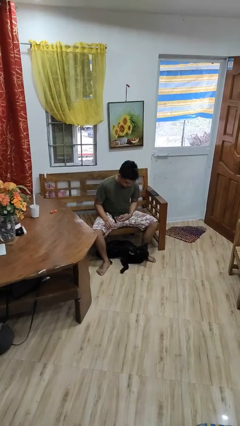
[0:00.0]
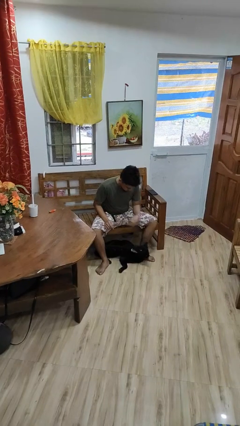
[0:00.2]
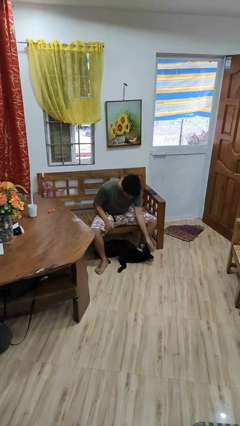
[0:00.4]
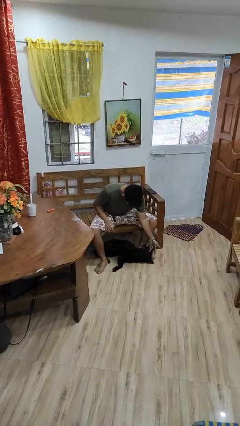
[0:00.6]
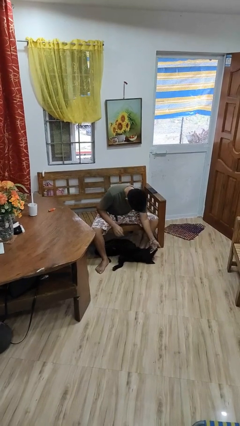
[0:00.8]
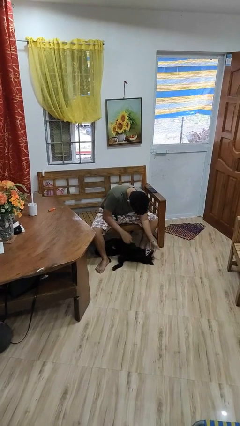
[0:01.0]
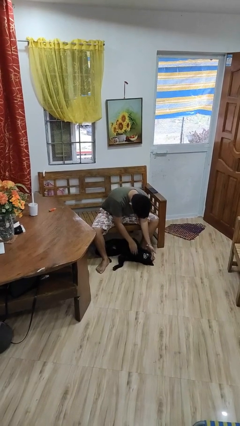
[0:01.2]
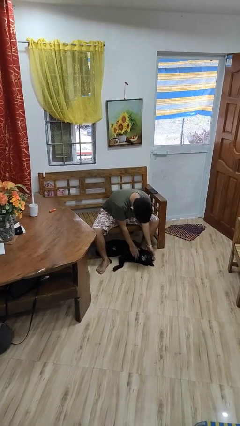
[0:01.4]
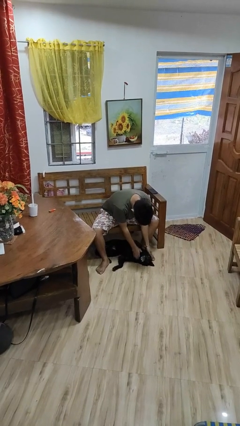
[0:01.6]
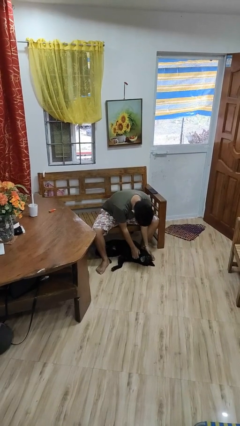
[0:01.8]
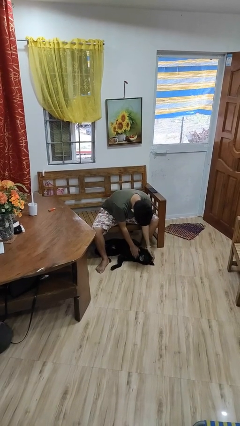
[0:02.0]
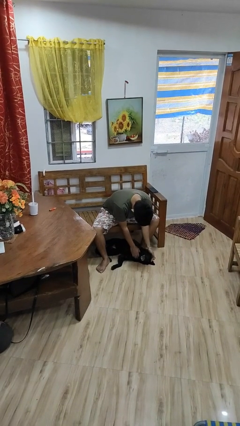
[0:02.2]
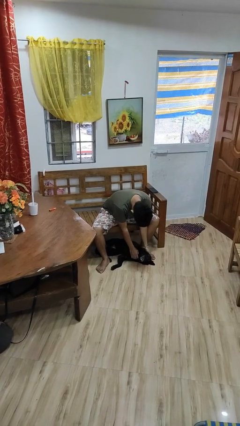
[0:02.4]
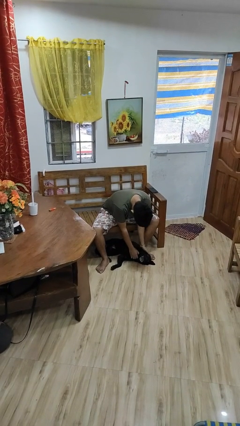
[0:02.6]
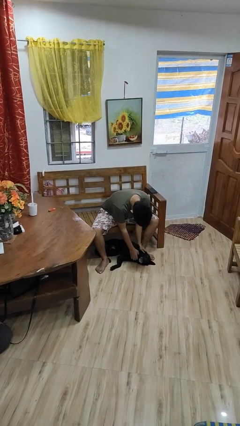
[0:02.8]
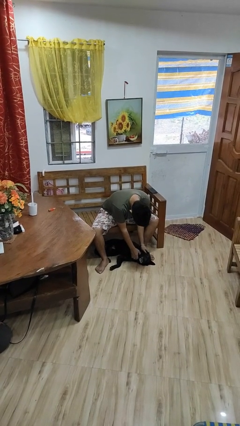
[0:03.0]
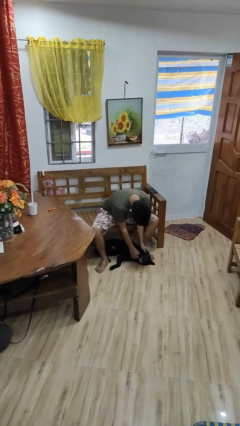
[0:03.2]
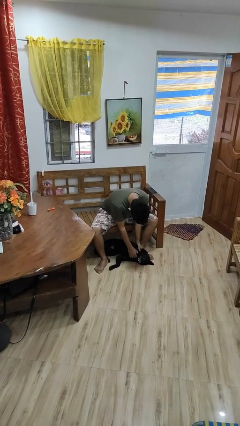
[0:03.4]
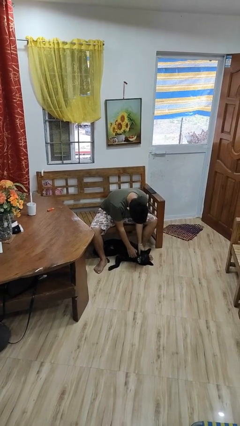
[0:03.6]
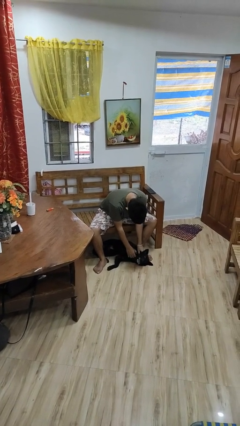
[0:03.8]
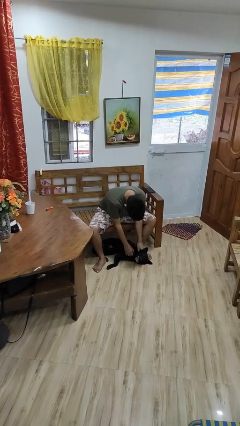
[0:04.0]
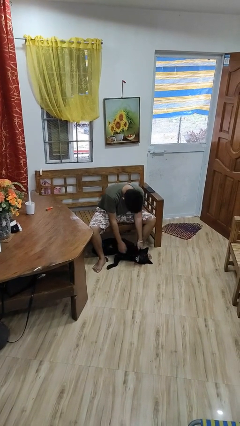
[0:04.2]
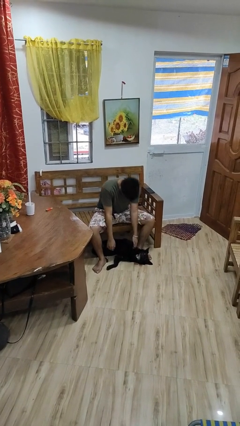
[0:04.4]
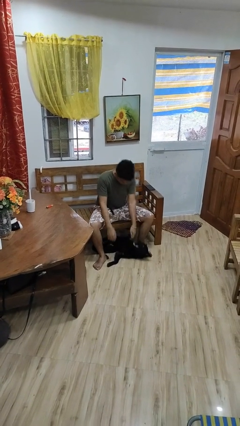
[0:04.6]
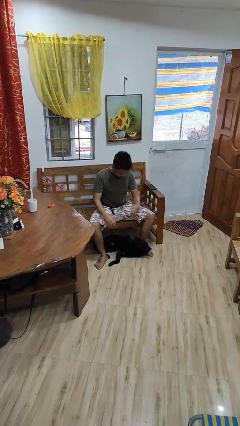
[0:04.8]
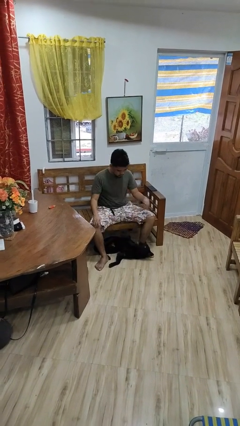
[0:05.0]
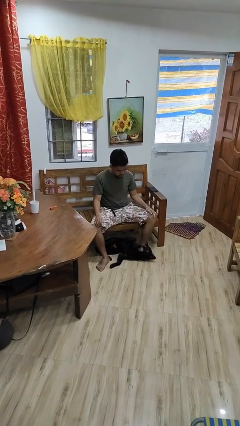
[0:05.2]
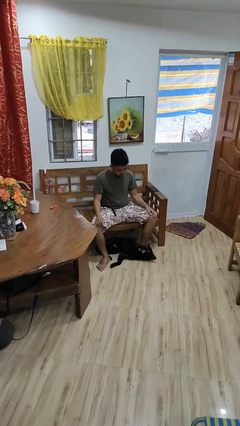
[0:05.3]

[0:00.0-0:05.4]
person pets dog

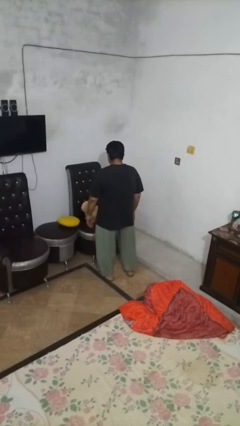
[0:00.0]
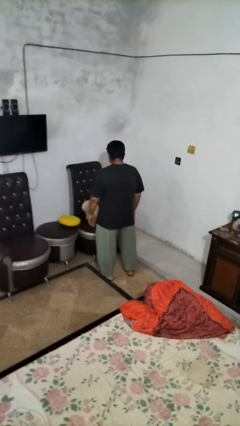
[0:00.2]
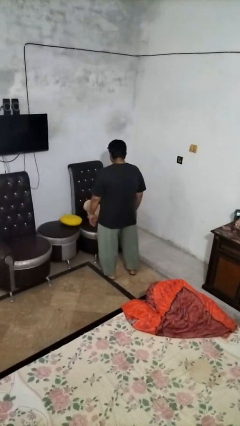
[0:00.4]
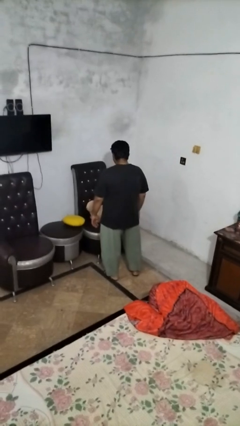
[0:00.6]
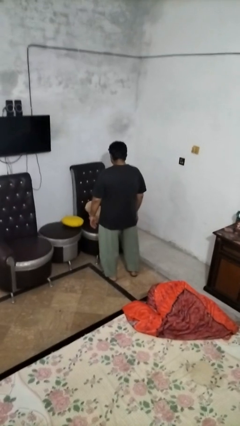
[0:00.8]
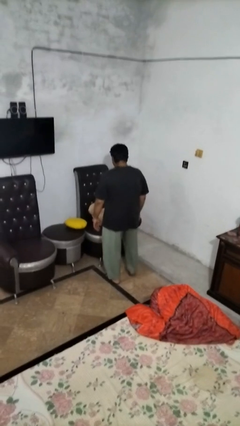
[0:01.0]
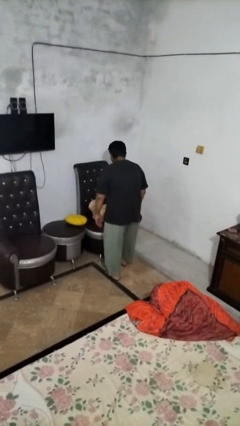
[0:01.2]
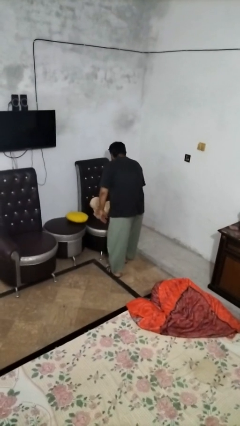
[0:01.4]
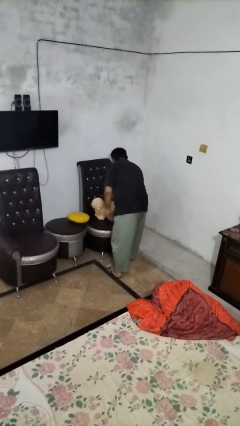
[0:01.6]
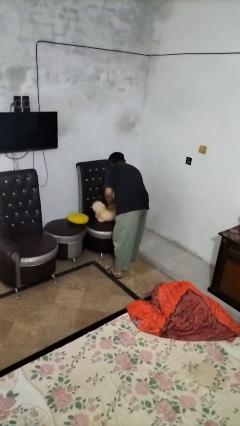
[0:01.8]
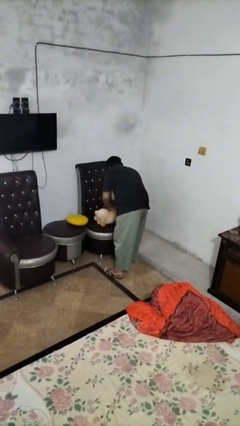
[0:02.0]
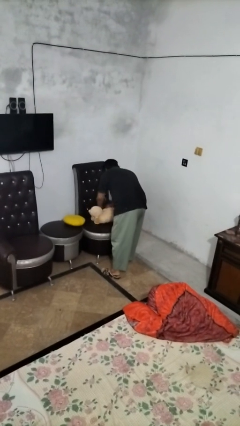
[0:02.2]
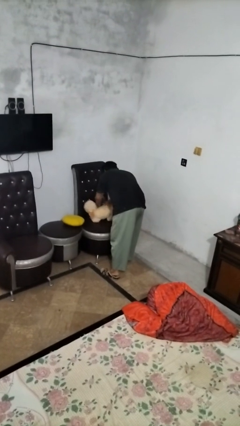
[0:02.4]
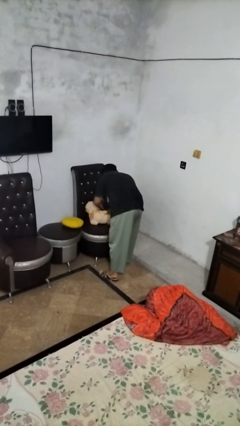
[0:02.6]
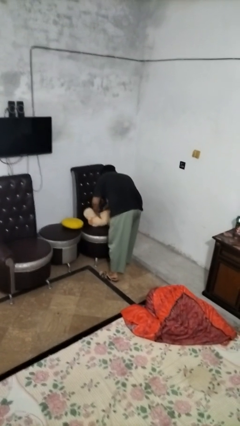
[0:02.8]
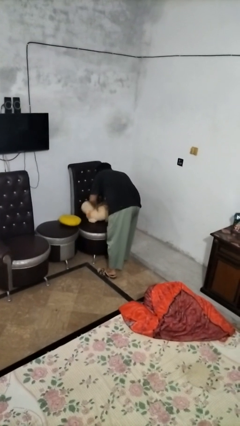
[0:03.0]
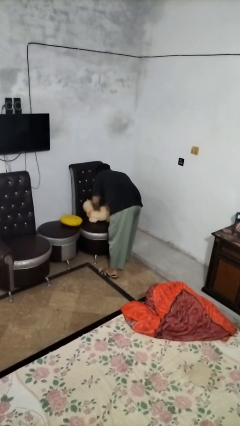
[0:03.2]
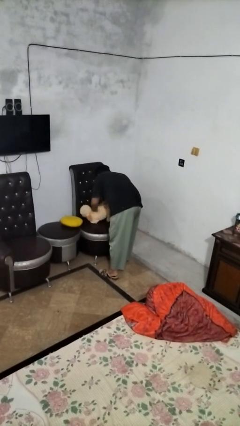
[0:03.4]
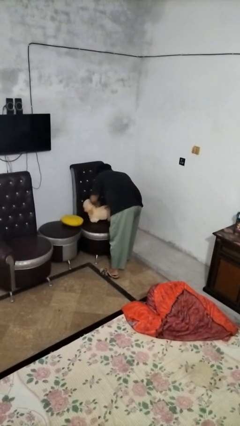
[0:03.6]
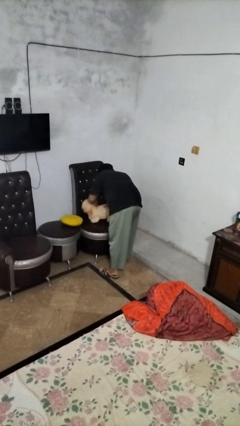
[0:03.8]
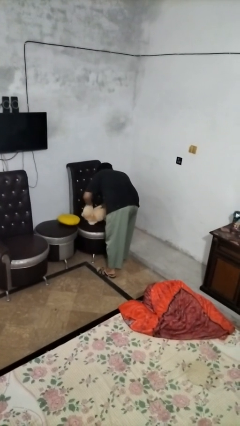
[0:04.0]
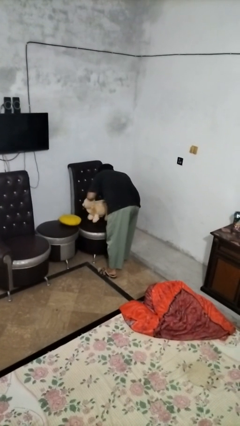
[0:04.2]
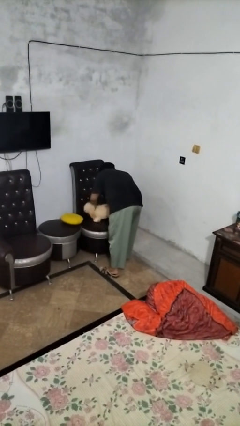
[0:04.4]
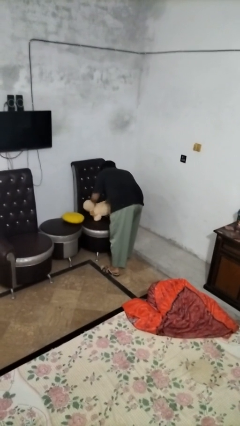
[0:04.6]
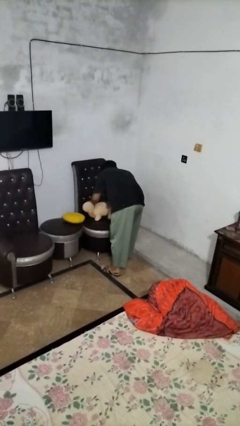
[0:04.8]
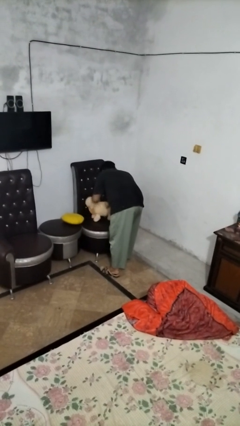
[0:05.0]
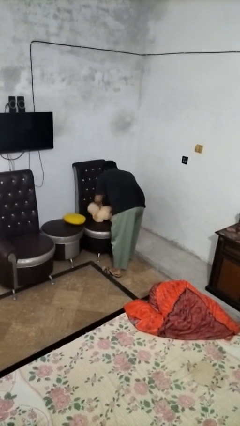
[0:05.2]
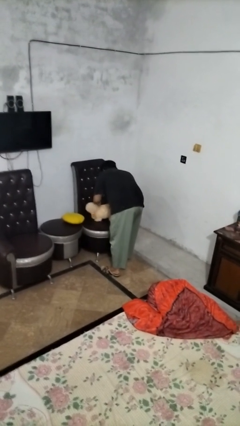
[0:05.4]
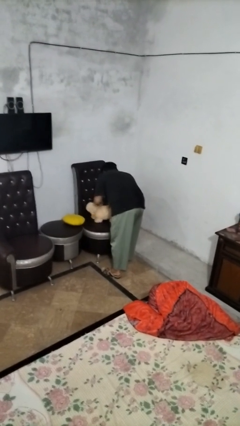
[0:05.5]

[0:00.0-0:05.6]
person searches in couch

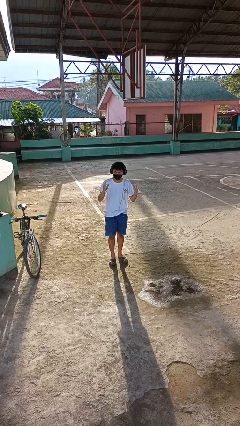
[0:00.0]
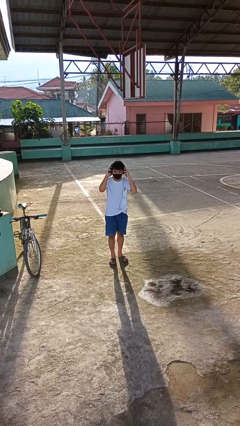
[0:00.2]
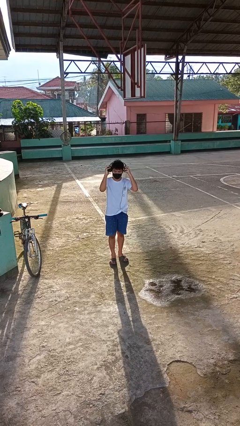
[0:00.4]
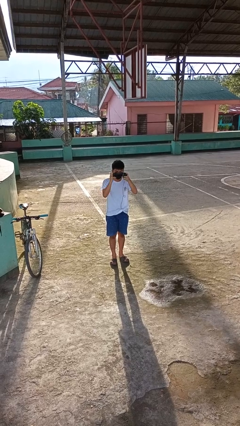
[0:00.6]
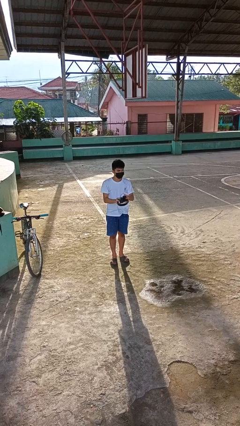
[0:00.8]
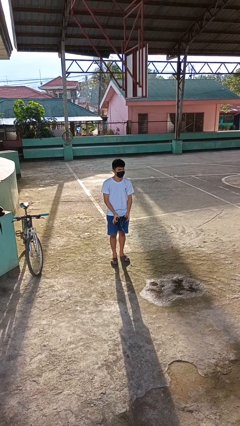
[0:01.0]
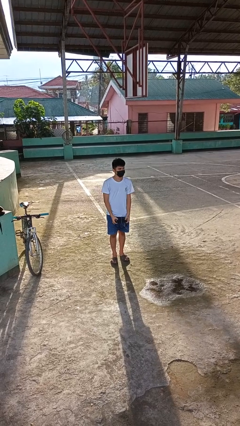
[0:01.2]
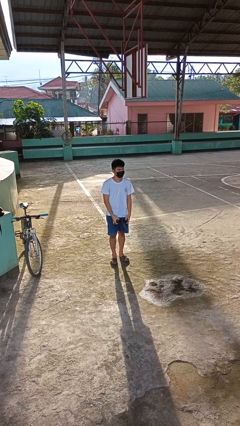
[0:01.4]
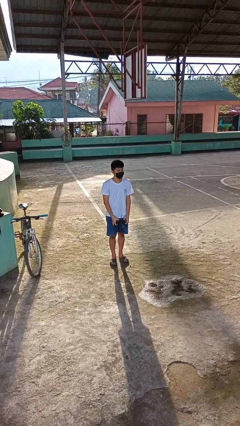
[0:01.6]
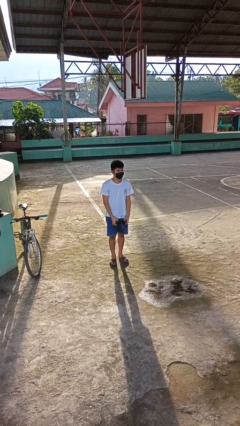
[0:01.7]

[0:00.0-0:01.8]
person takes off headphones

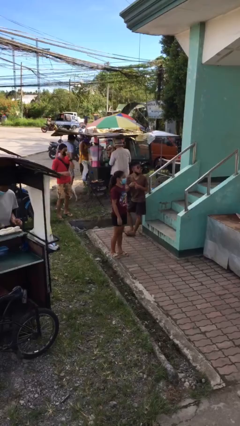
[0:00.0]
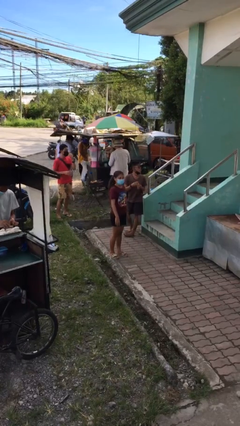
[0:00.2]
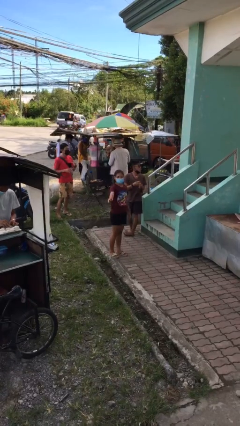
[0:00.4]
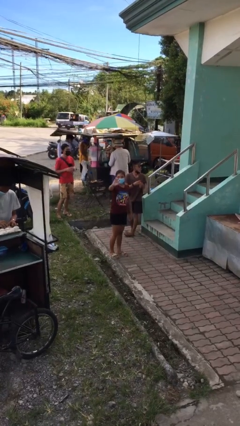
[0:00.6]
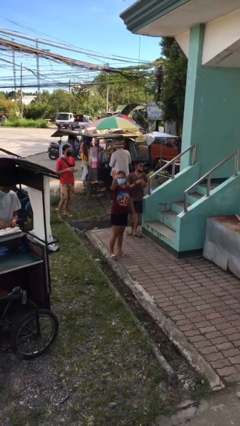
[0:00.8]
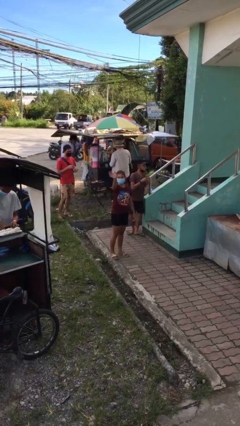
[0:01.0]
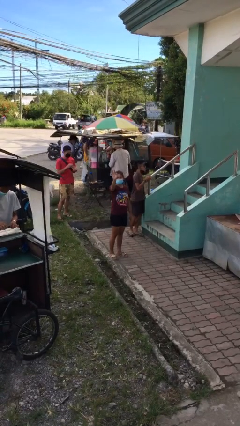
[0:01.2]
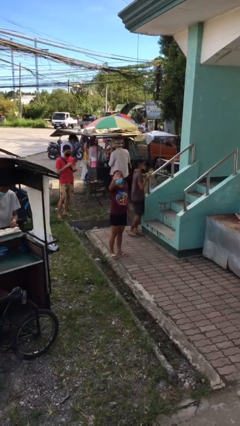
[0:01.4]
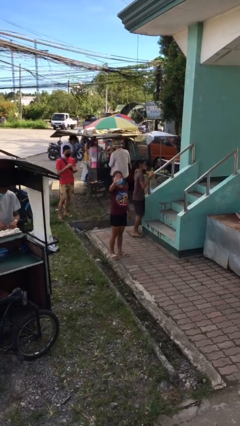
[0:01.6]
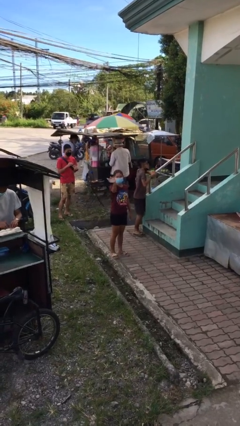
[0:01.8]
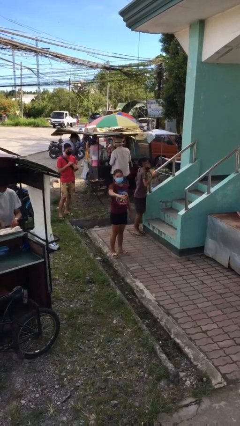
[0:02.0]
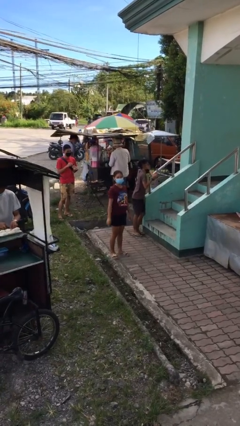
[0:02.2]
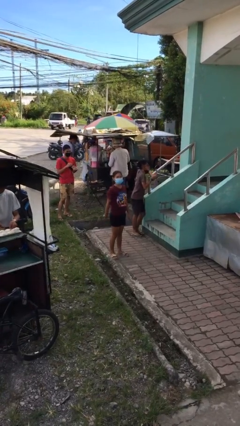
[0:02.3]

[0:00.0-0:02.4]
person waves at person

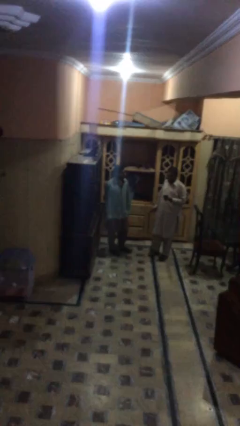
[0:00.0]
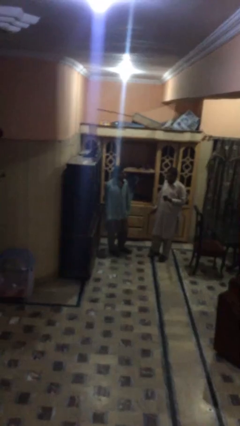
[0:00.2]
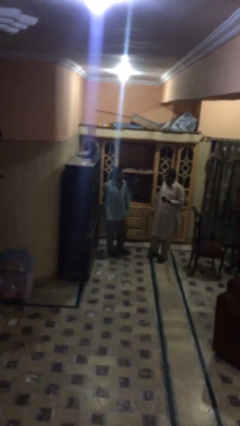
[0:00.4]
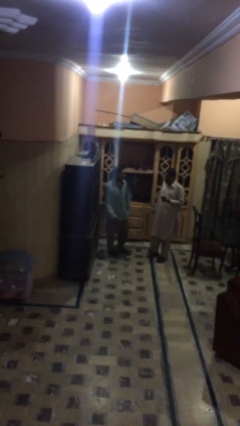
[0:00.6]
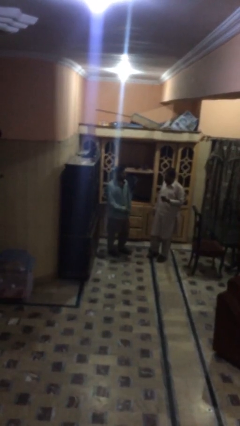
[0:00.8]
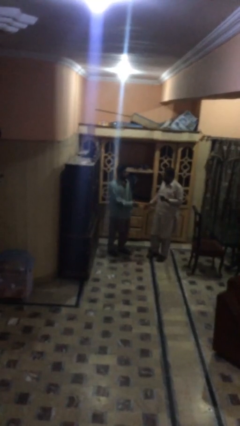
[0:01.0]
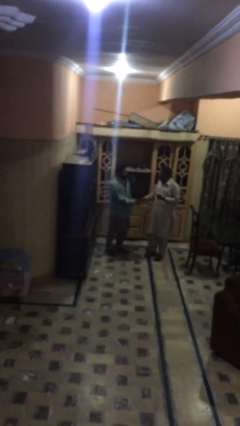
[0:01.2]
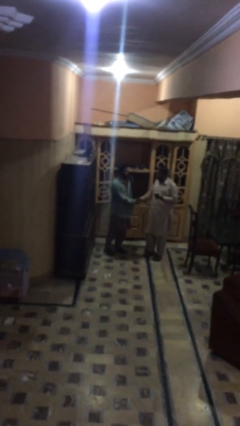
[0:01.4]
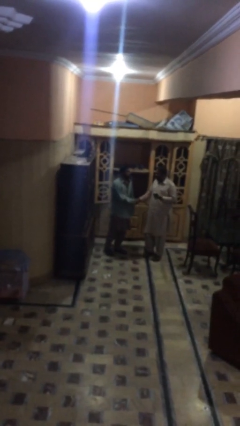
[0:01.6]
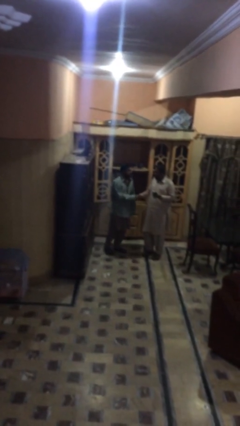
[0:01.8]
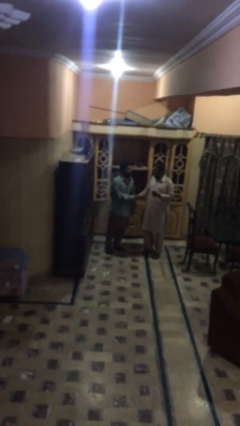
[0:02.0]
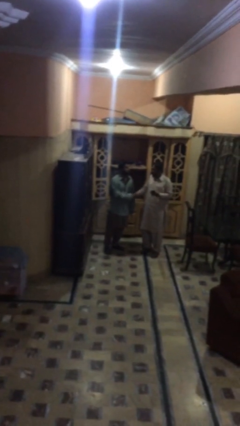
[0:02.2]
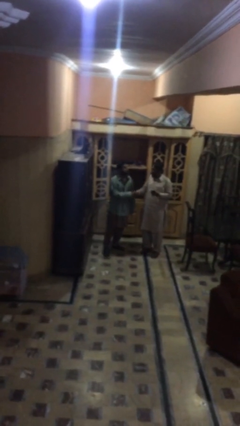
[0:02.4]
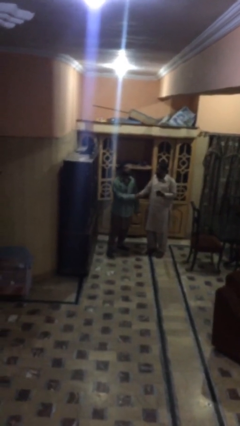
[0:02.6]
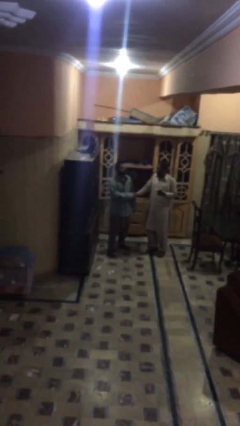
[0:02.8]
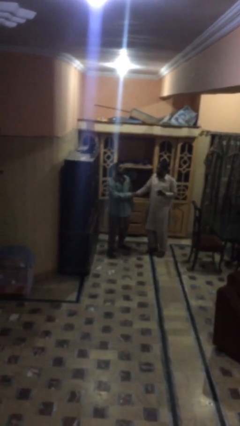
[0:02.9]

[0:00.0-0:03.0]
person shakes hand
